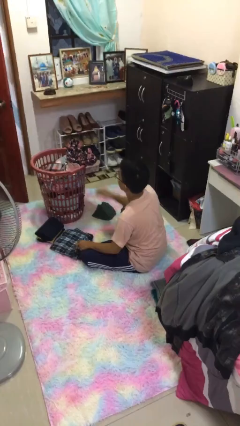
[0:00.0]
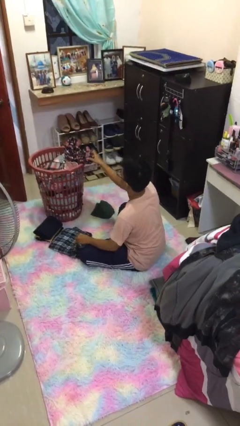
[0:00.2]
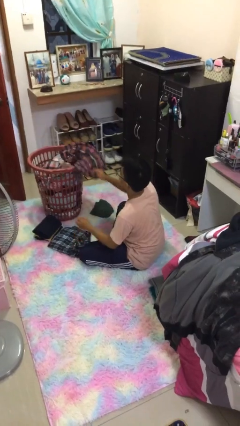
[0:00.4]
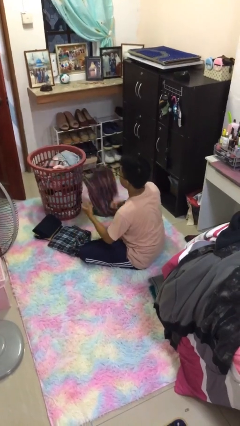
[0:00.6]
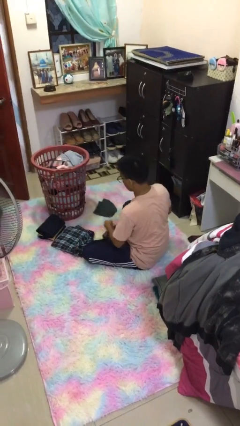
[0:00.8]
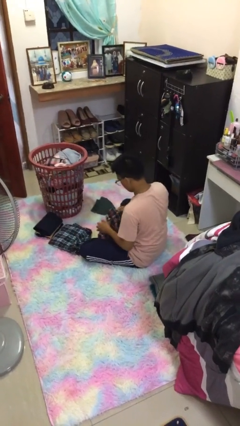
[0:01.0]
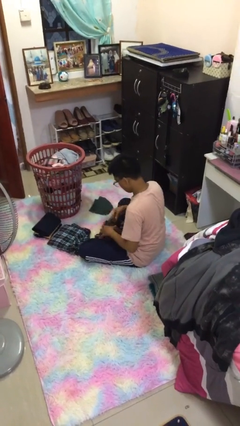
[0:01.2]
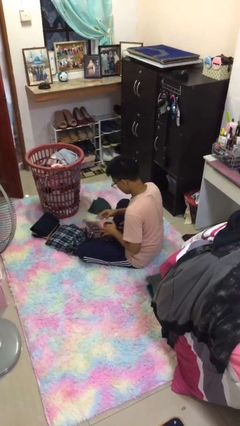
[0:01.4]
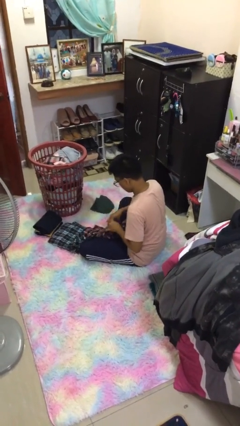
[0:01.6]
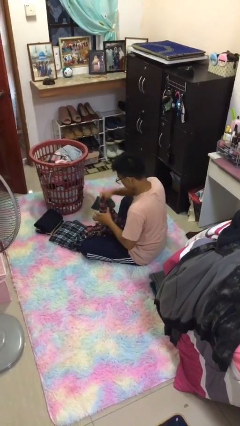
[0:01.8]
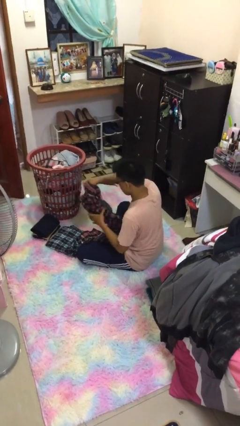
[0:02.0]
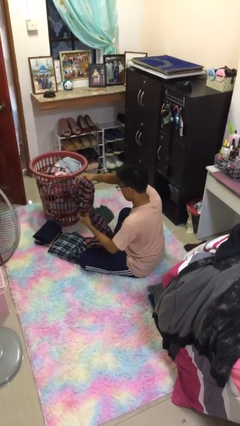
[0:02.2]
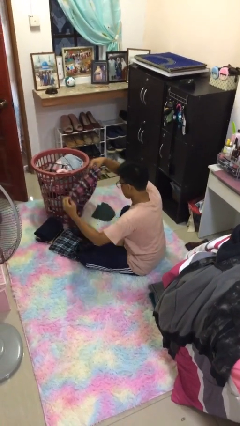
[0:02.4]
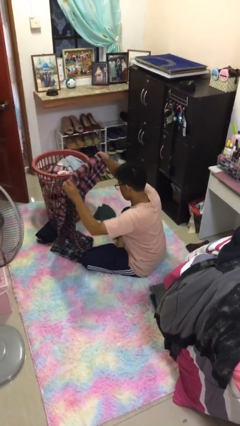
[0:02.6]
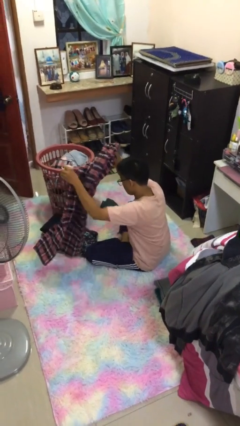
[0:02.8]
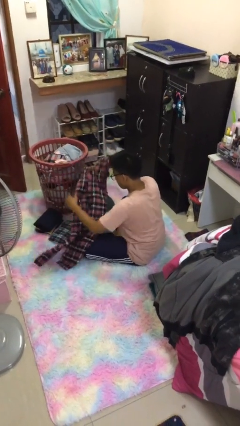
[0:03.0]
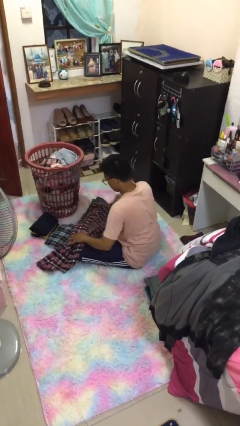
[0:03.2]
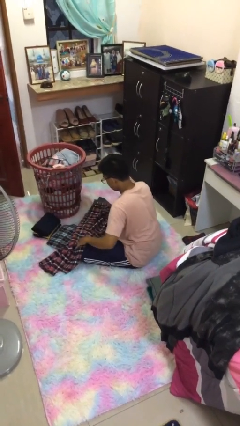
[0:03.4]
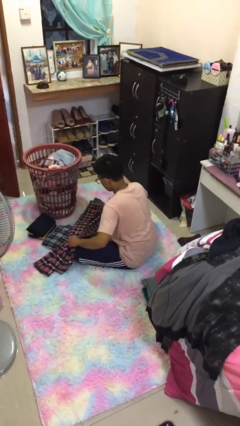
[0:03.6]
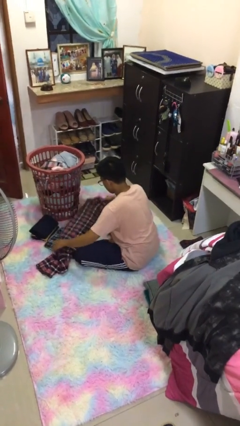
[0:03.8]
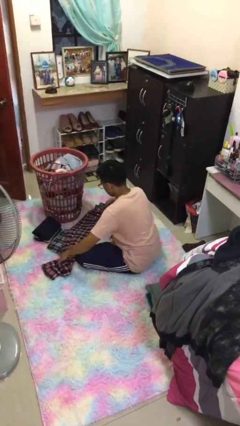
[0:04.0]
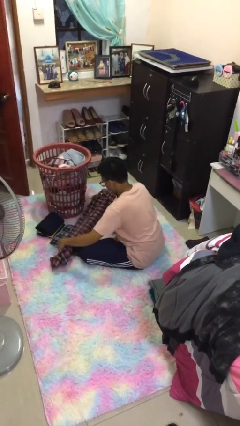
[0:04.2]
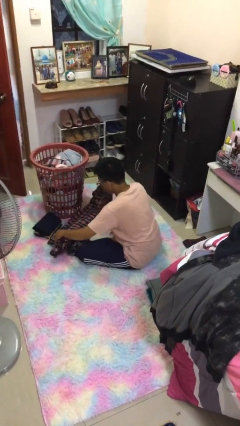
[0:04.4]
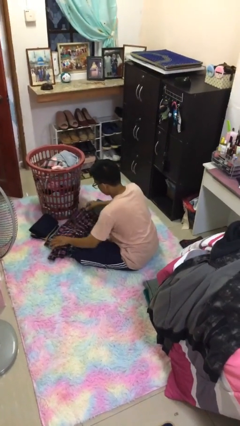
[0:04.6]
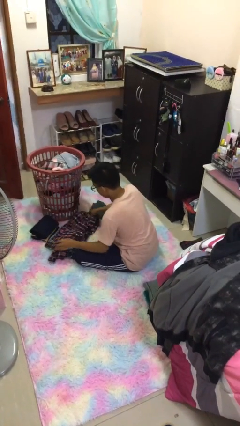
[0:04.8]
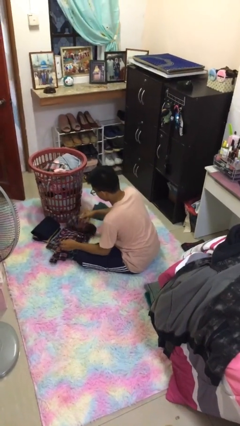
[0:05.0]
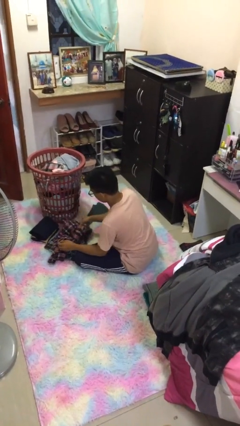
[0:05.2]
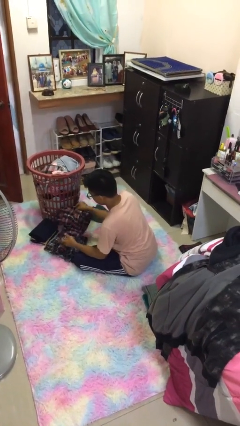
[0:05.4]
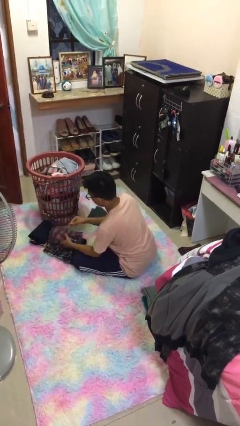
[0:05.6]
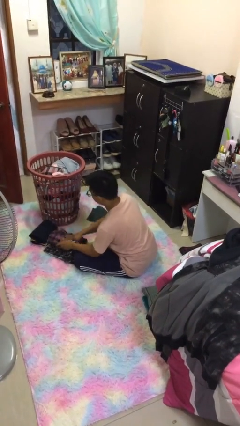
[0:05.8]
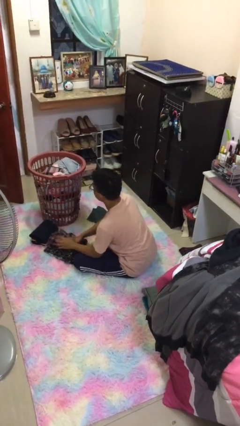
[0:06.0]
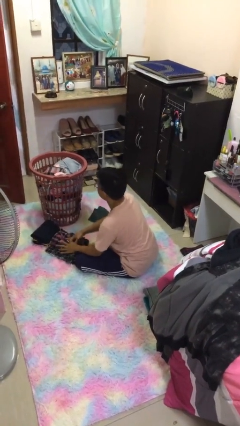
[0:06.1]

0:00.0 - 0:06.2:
person folds pants

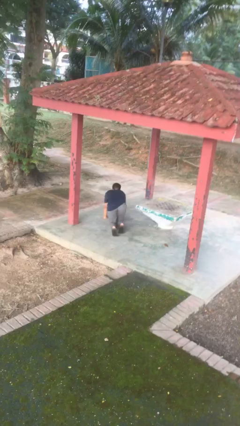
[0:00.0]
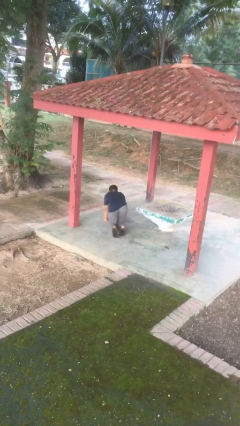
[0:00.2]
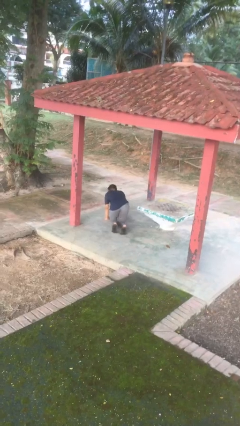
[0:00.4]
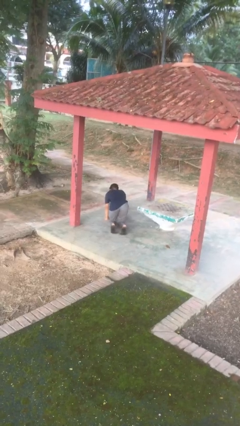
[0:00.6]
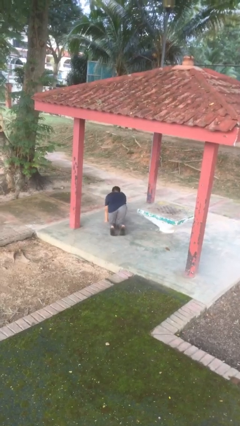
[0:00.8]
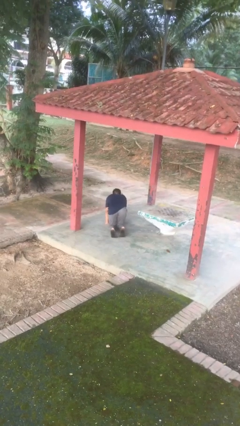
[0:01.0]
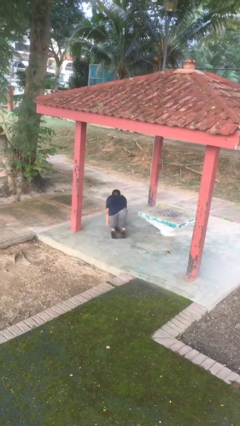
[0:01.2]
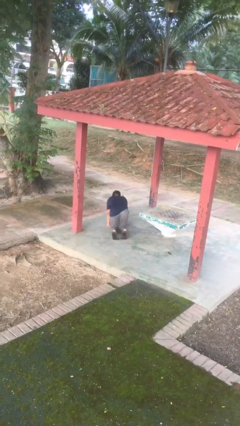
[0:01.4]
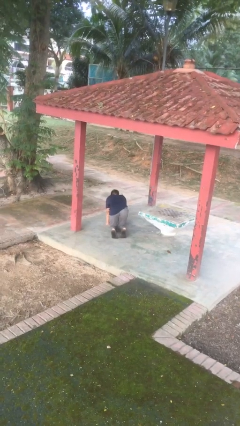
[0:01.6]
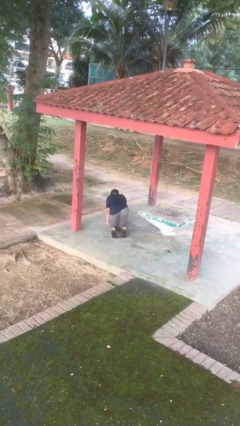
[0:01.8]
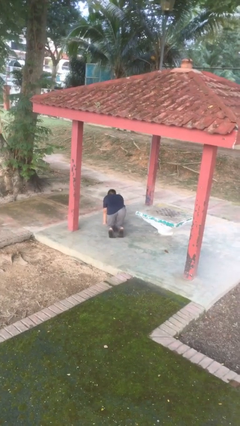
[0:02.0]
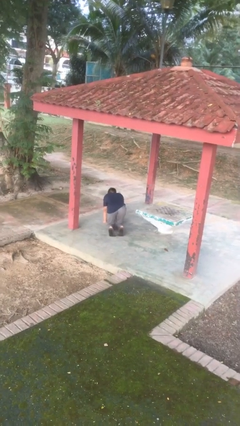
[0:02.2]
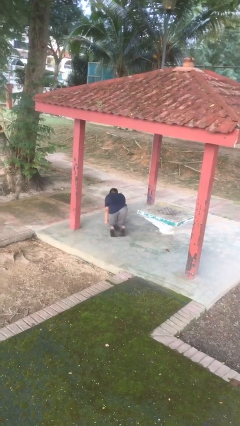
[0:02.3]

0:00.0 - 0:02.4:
person crawls

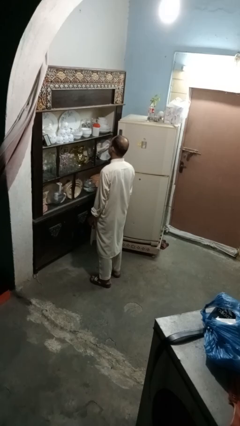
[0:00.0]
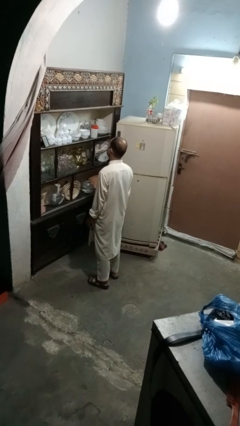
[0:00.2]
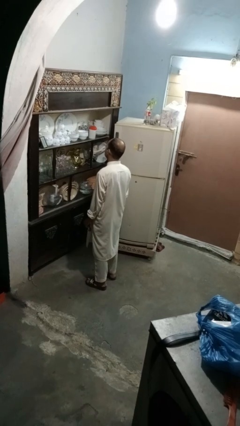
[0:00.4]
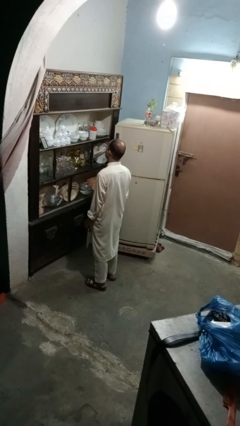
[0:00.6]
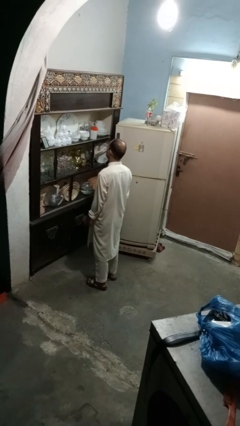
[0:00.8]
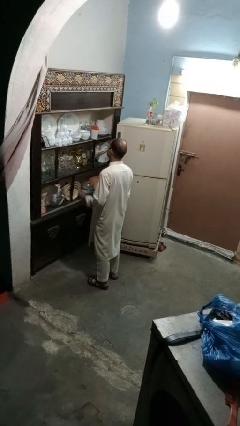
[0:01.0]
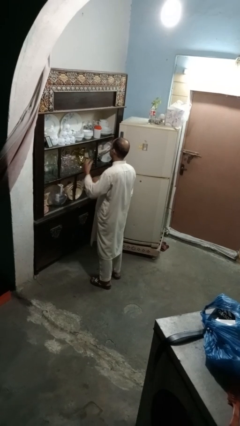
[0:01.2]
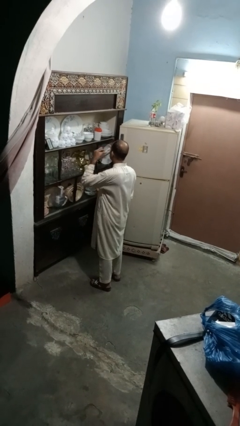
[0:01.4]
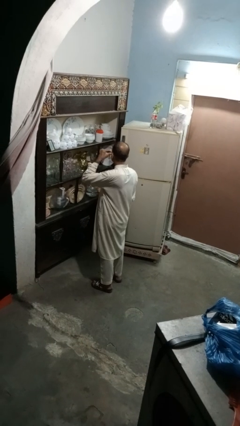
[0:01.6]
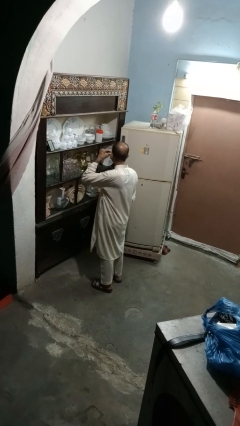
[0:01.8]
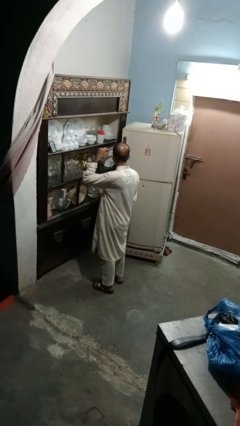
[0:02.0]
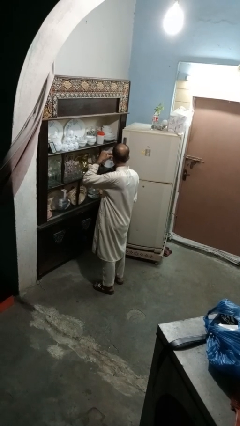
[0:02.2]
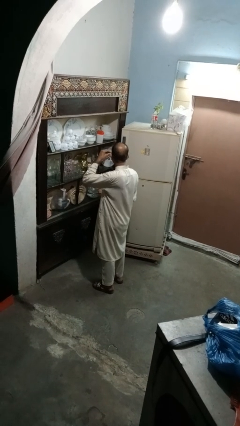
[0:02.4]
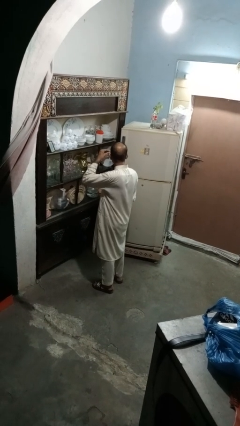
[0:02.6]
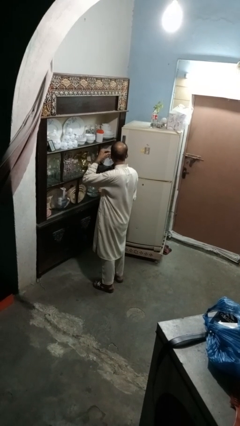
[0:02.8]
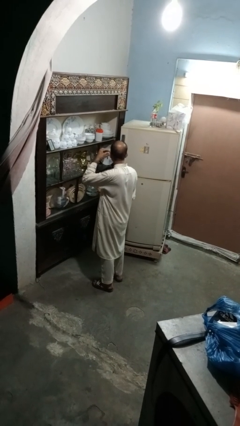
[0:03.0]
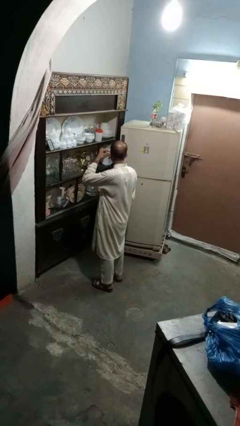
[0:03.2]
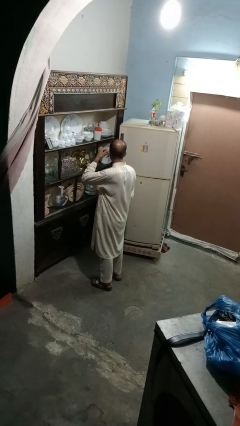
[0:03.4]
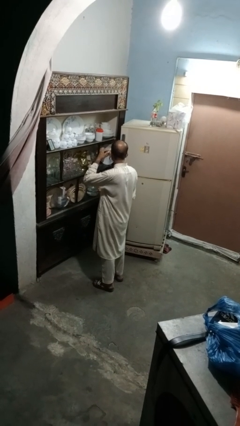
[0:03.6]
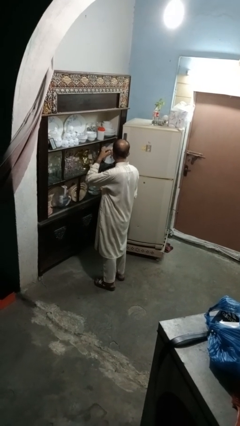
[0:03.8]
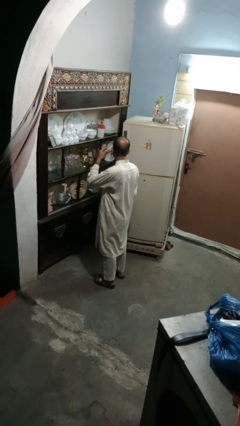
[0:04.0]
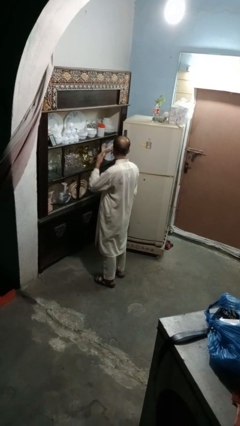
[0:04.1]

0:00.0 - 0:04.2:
person puts on earrings

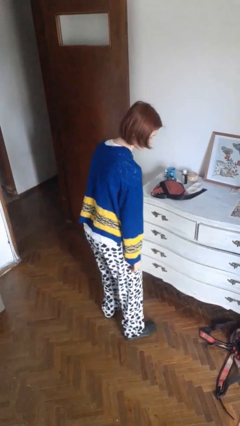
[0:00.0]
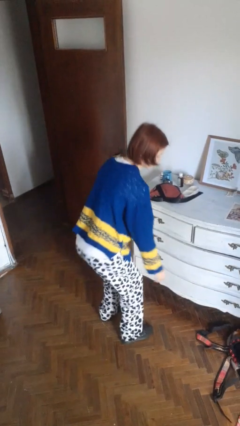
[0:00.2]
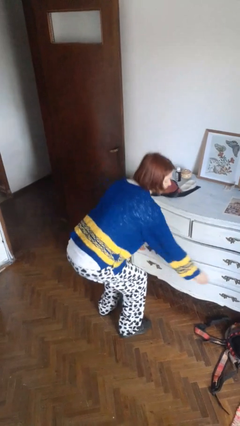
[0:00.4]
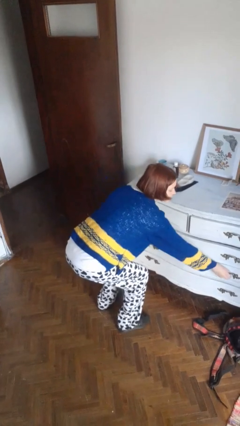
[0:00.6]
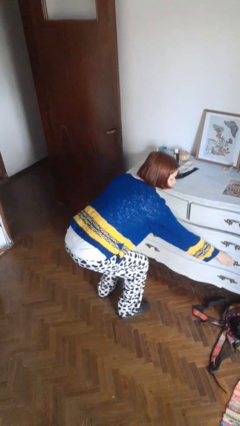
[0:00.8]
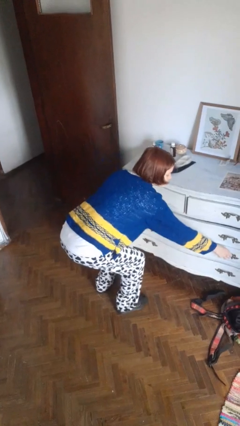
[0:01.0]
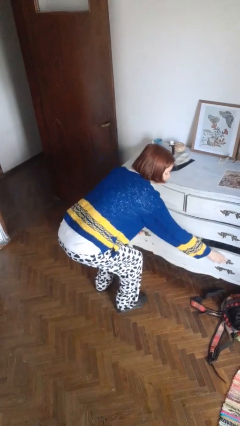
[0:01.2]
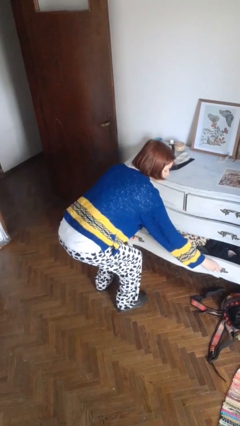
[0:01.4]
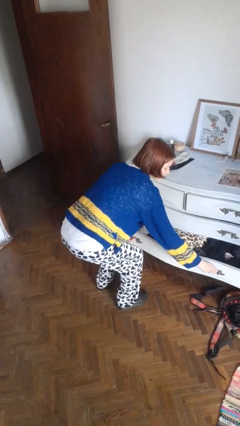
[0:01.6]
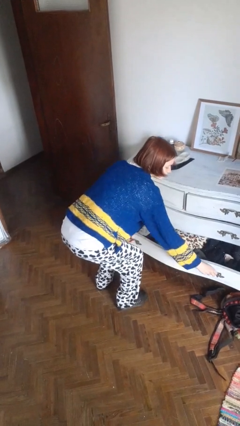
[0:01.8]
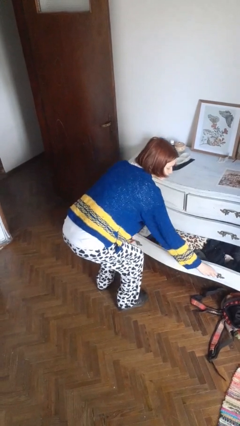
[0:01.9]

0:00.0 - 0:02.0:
person opens dresser drawer

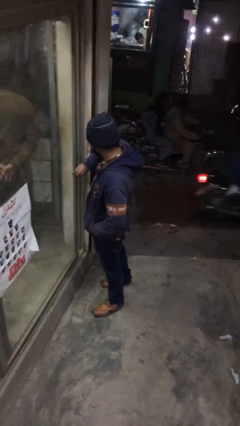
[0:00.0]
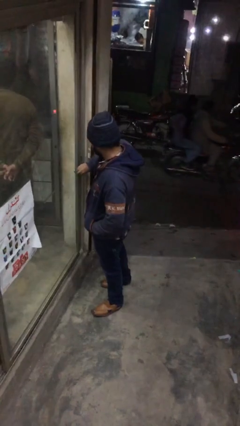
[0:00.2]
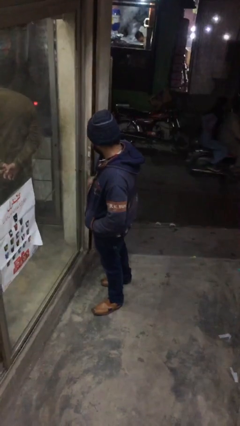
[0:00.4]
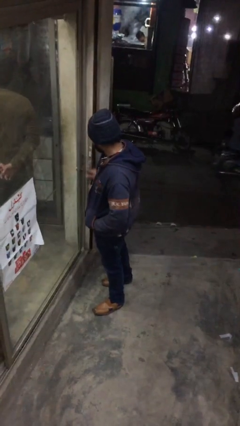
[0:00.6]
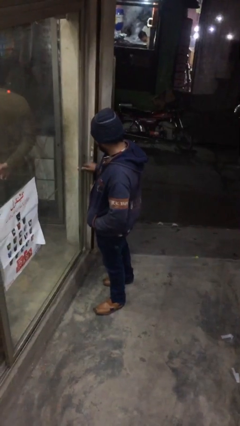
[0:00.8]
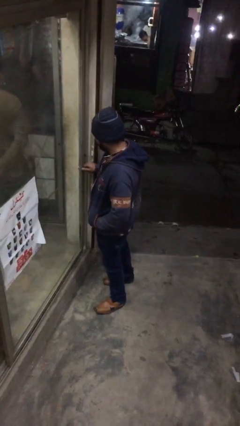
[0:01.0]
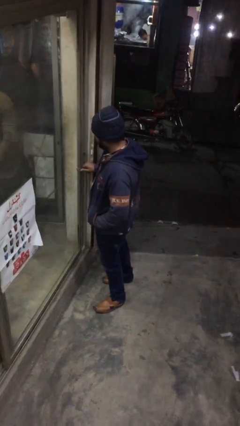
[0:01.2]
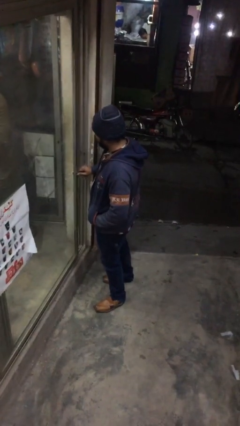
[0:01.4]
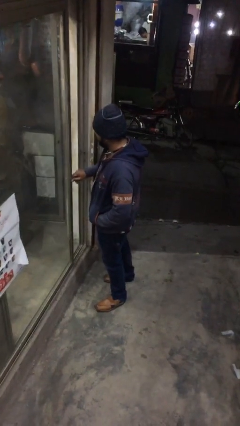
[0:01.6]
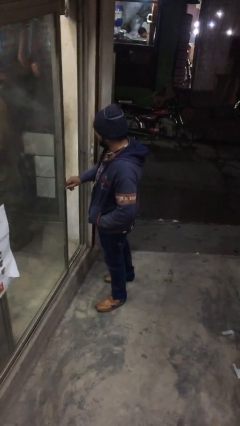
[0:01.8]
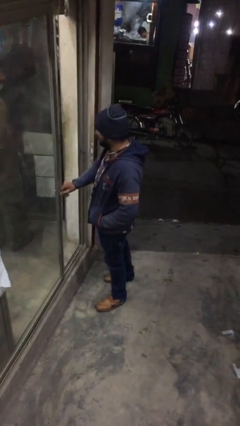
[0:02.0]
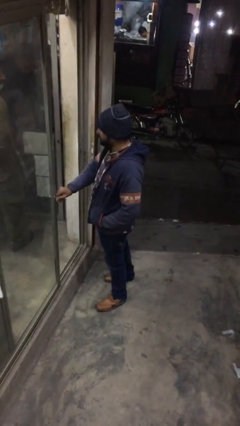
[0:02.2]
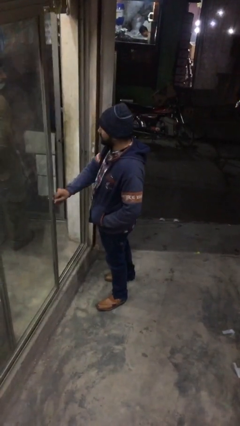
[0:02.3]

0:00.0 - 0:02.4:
person opens facility door
